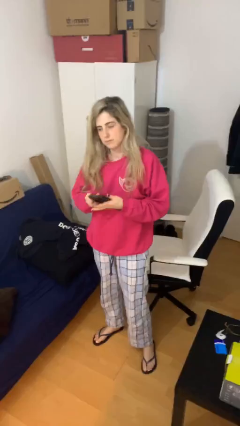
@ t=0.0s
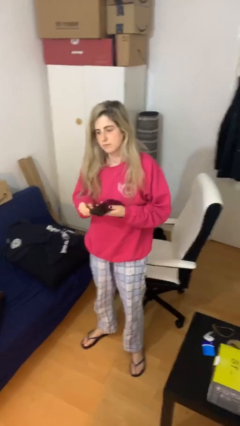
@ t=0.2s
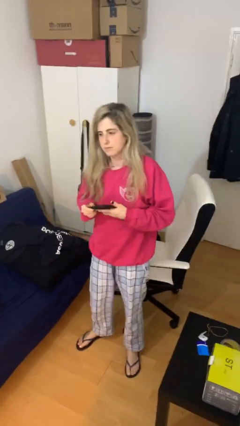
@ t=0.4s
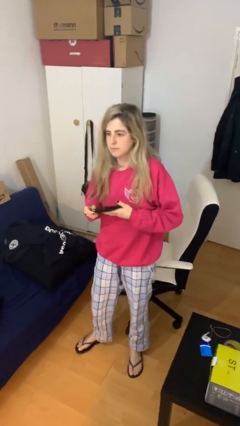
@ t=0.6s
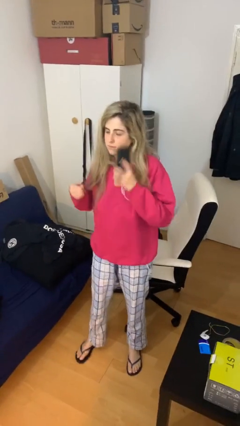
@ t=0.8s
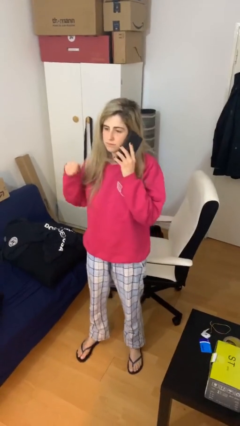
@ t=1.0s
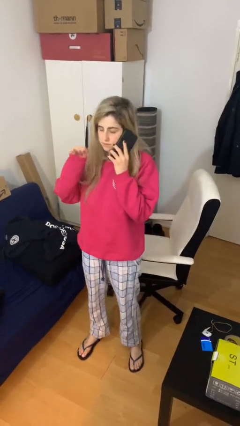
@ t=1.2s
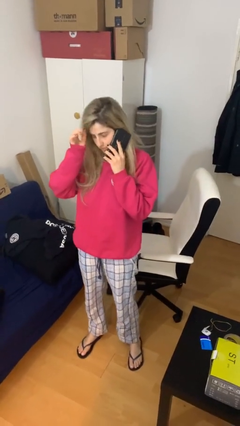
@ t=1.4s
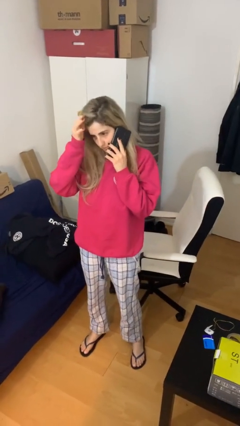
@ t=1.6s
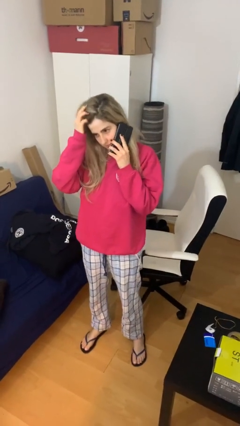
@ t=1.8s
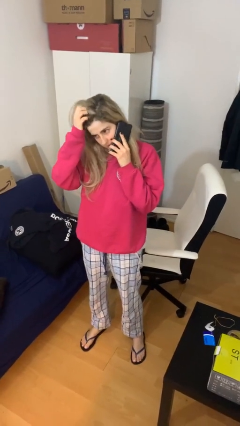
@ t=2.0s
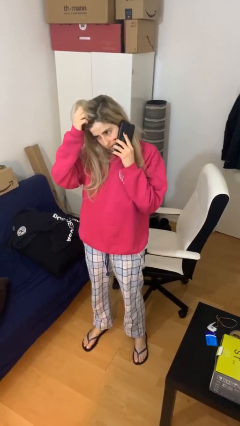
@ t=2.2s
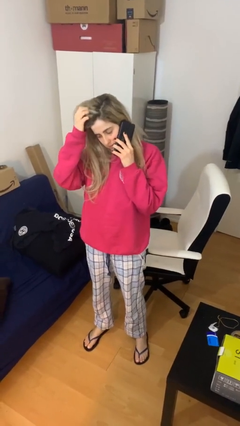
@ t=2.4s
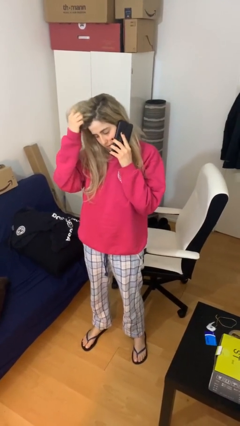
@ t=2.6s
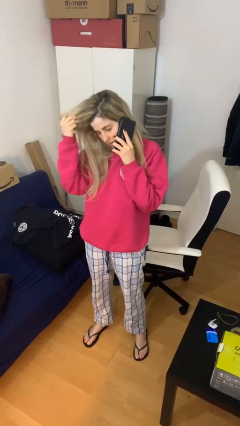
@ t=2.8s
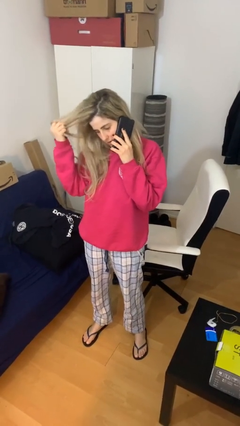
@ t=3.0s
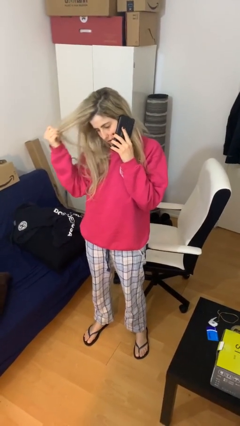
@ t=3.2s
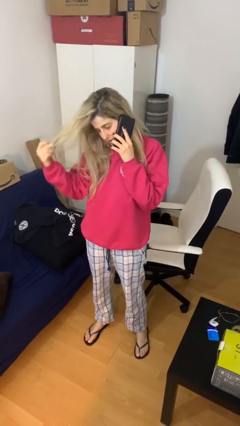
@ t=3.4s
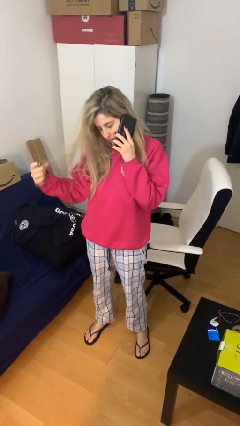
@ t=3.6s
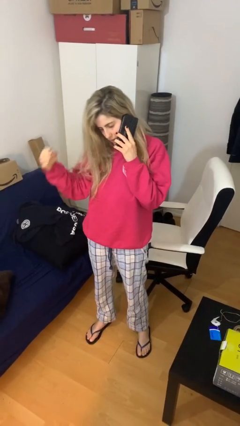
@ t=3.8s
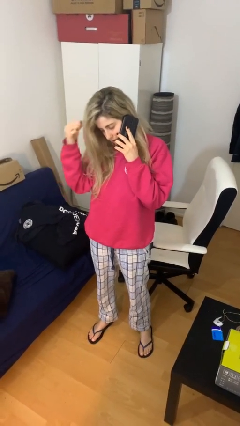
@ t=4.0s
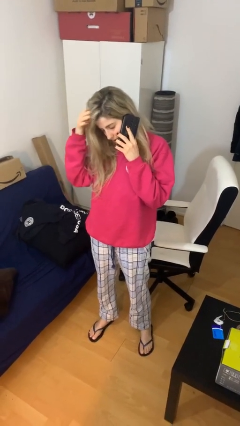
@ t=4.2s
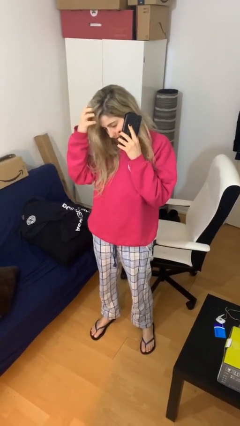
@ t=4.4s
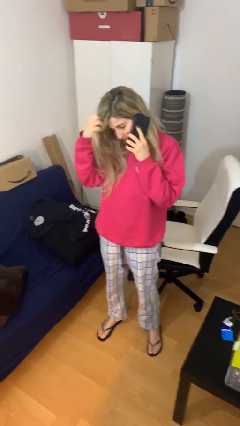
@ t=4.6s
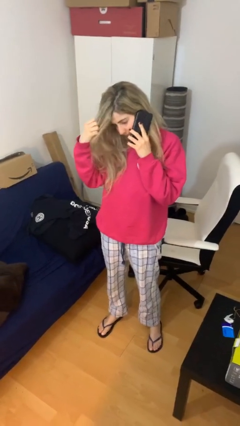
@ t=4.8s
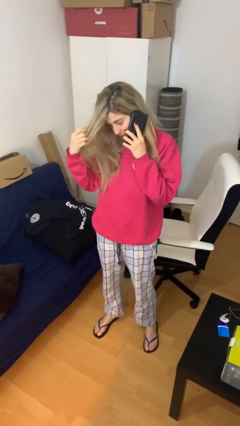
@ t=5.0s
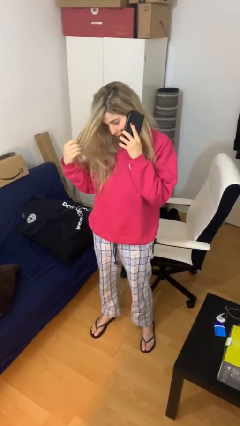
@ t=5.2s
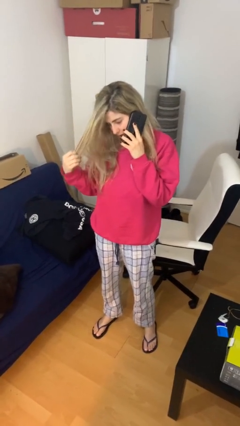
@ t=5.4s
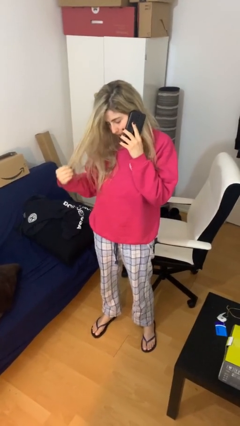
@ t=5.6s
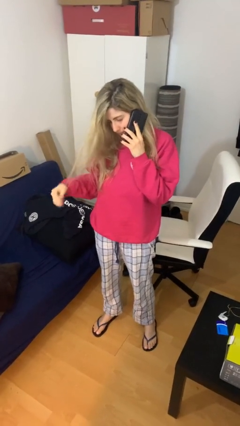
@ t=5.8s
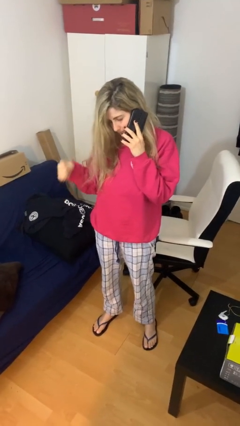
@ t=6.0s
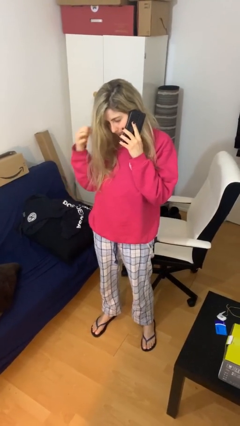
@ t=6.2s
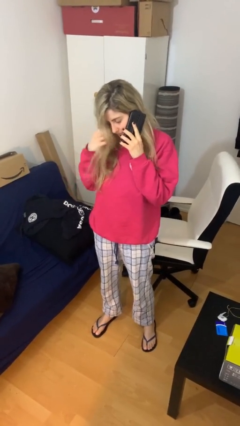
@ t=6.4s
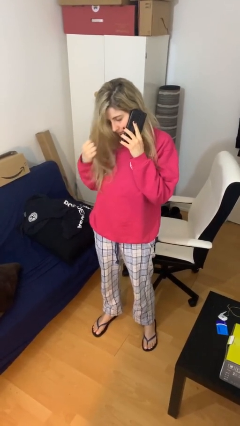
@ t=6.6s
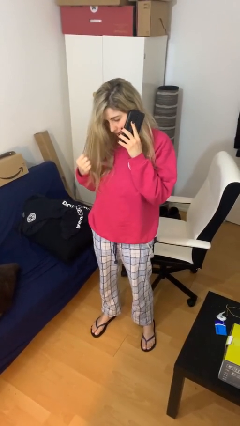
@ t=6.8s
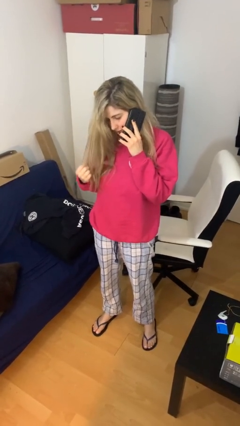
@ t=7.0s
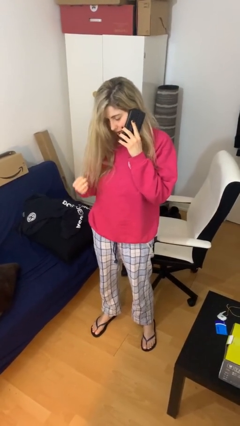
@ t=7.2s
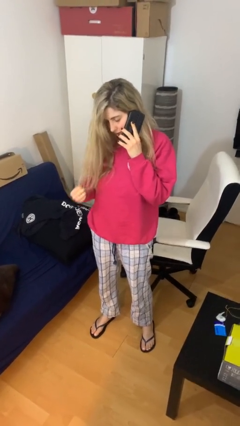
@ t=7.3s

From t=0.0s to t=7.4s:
person talks on phone

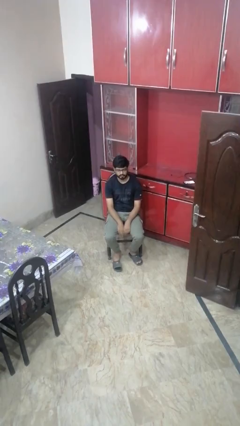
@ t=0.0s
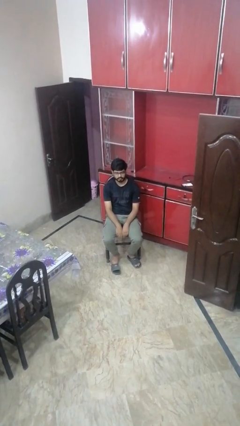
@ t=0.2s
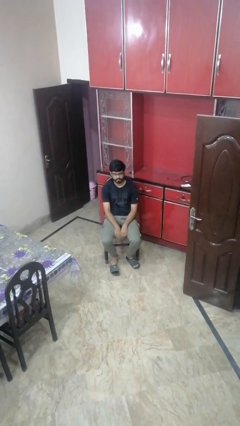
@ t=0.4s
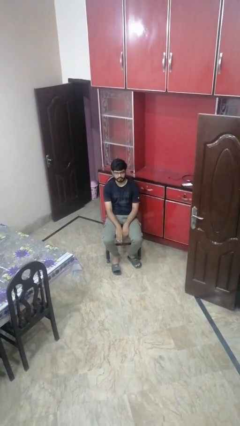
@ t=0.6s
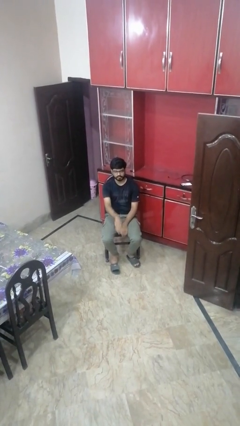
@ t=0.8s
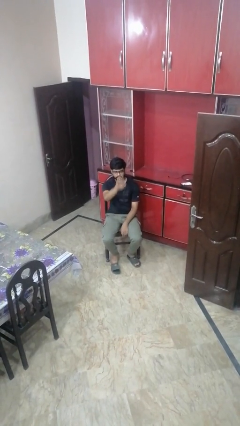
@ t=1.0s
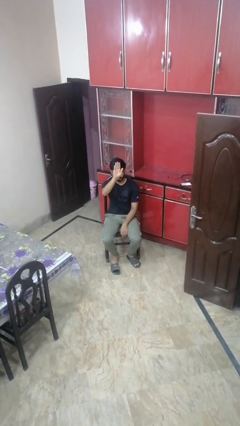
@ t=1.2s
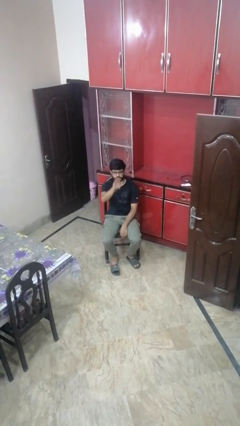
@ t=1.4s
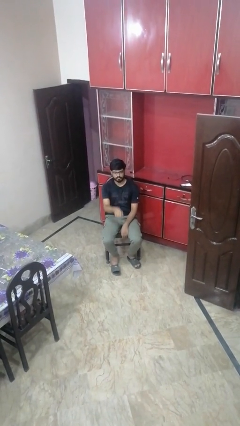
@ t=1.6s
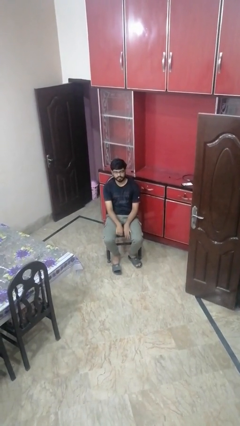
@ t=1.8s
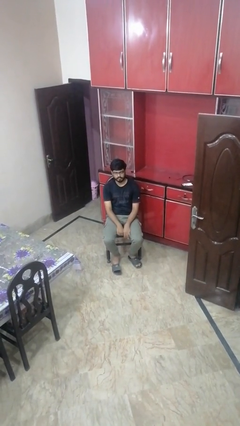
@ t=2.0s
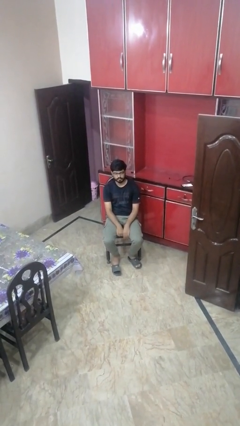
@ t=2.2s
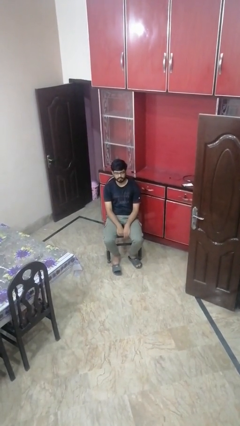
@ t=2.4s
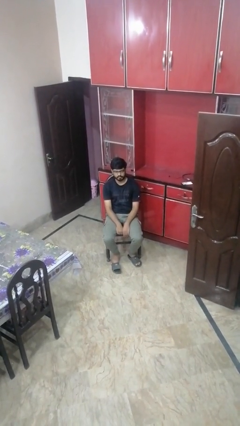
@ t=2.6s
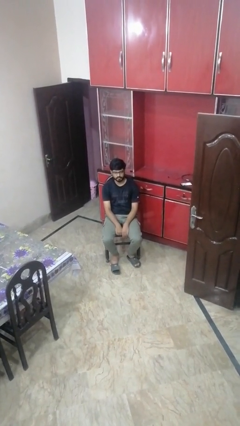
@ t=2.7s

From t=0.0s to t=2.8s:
person gestures swipe up

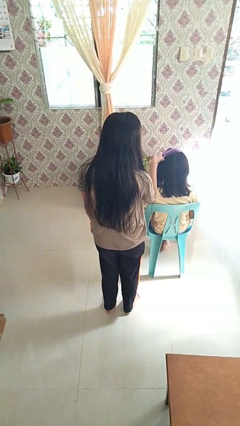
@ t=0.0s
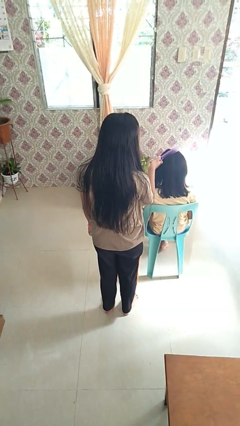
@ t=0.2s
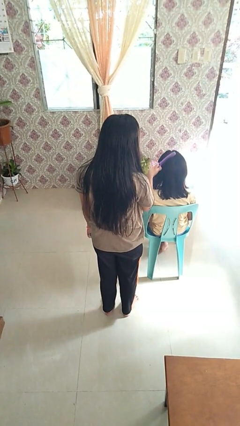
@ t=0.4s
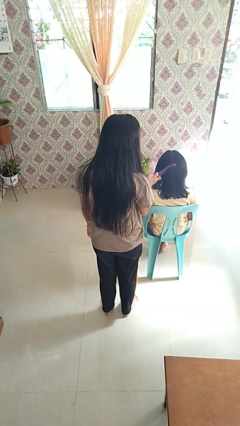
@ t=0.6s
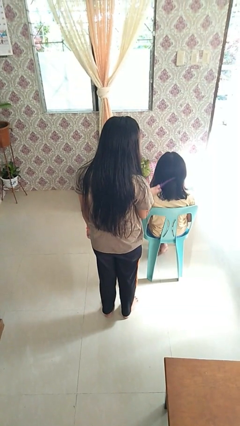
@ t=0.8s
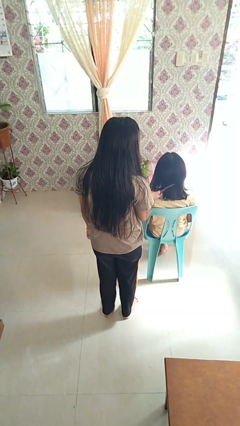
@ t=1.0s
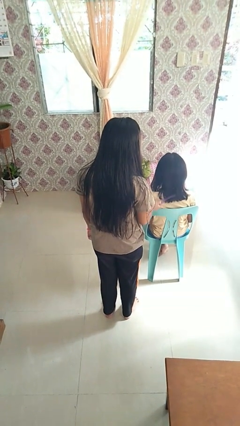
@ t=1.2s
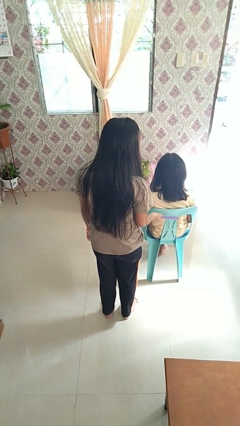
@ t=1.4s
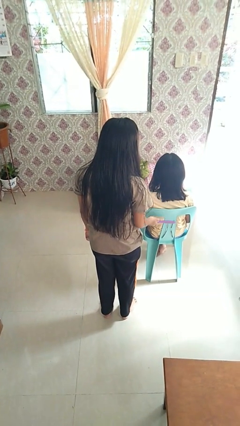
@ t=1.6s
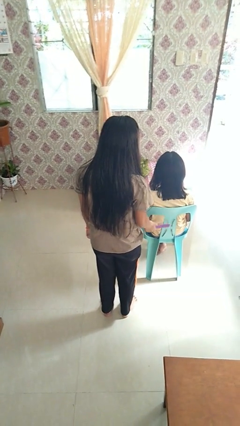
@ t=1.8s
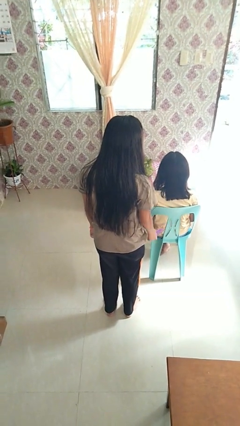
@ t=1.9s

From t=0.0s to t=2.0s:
person brushes hair of person

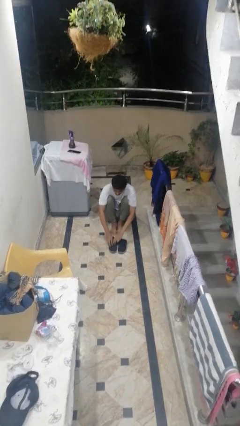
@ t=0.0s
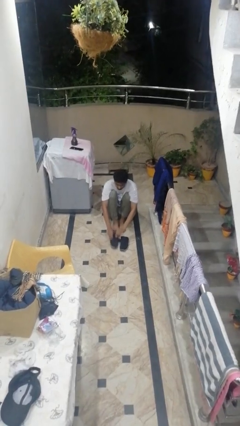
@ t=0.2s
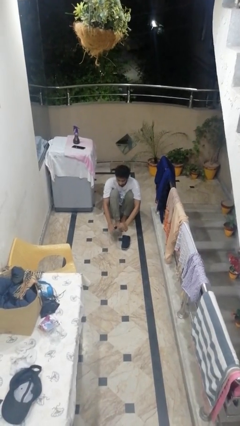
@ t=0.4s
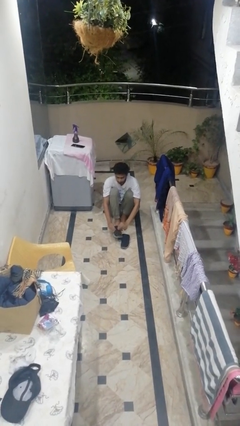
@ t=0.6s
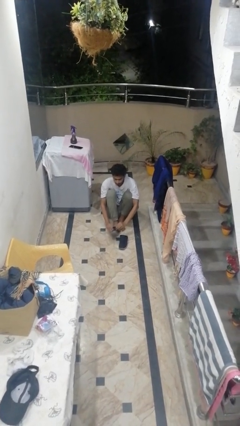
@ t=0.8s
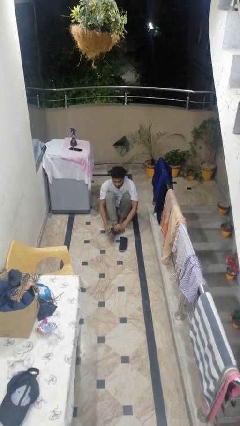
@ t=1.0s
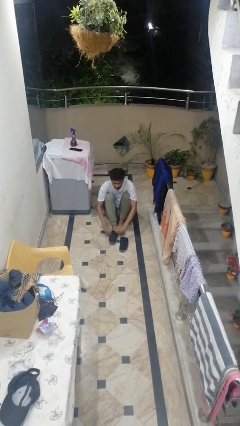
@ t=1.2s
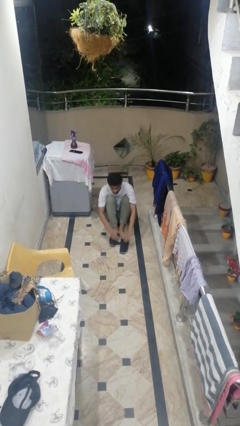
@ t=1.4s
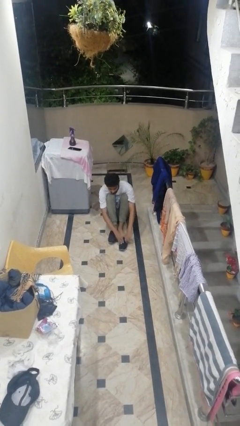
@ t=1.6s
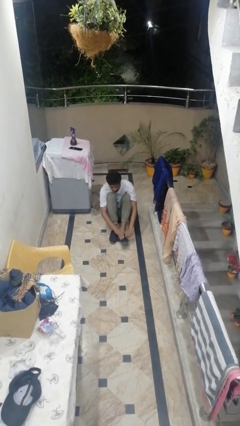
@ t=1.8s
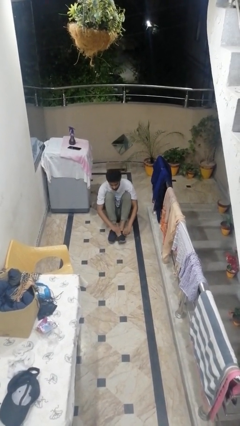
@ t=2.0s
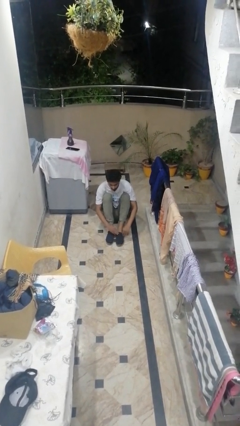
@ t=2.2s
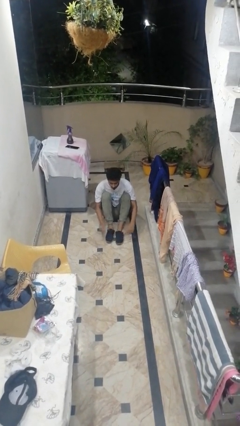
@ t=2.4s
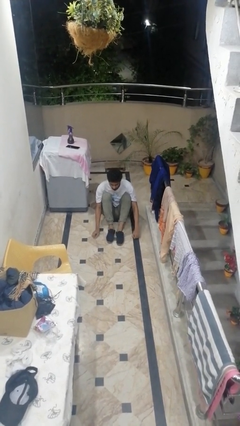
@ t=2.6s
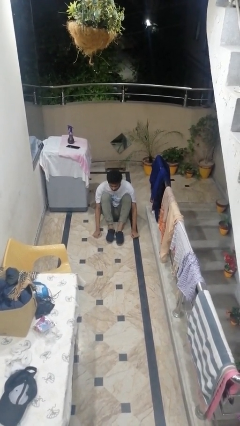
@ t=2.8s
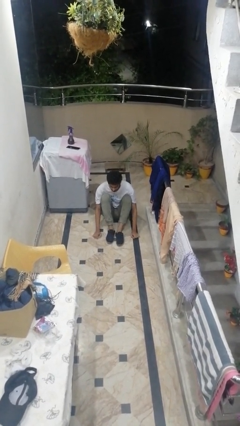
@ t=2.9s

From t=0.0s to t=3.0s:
person puts on shoes

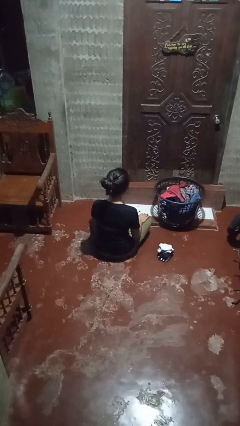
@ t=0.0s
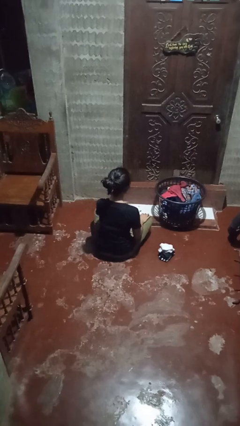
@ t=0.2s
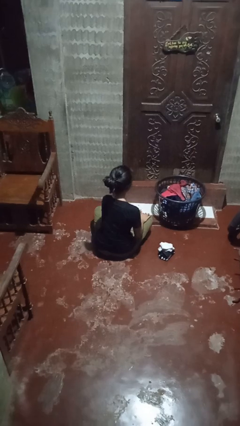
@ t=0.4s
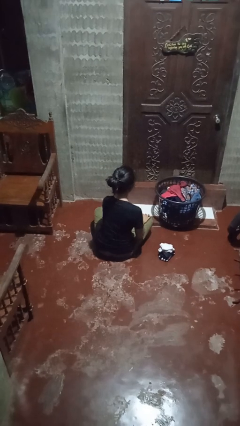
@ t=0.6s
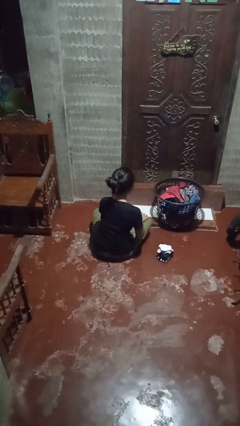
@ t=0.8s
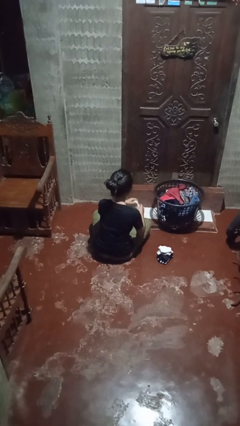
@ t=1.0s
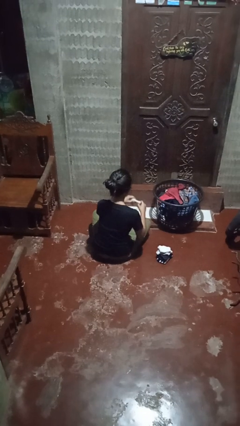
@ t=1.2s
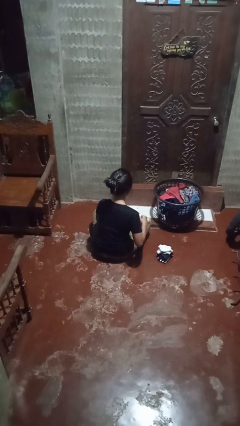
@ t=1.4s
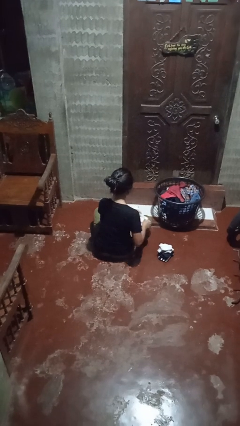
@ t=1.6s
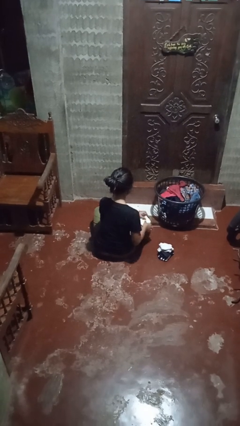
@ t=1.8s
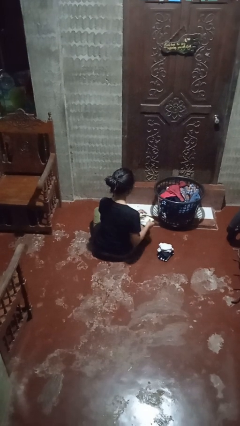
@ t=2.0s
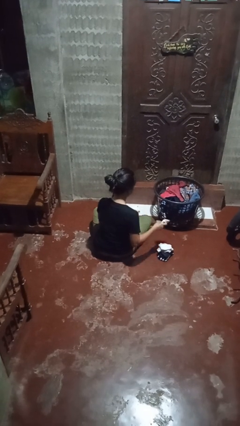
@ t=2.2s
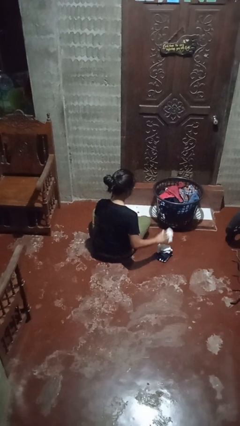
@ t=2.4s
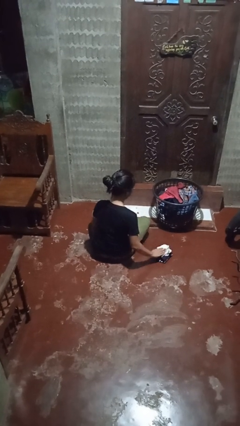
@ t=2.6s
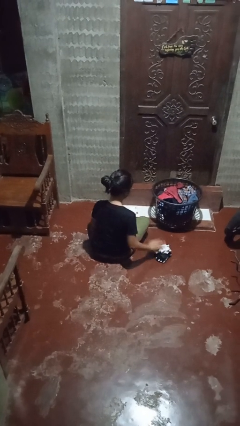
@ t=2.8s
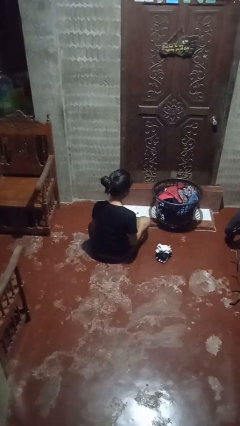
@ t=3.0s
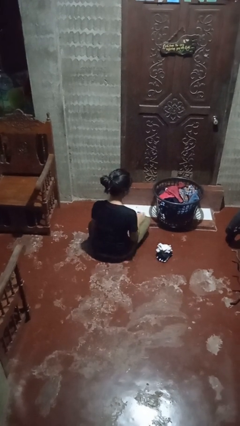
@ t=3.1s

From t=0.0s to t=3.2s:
person folds socks
